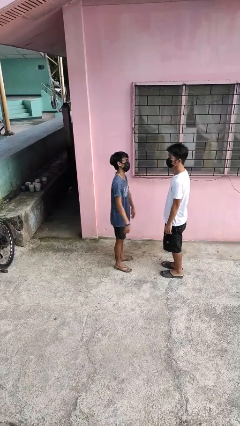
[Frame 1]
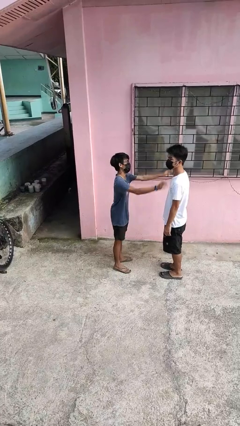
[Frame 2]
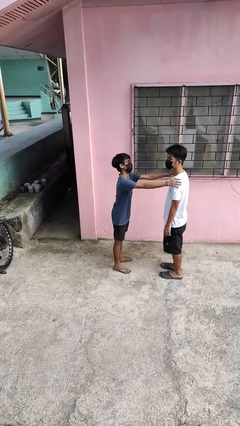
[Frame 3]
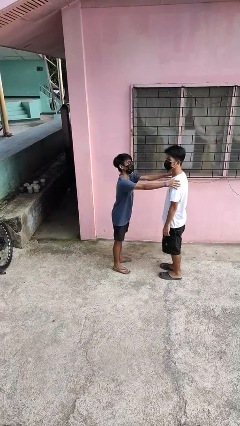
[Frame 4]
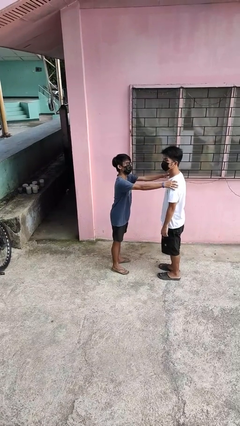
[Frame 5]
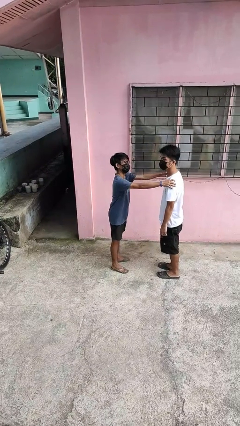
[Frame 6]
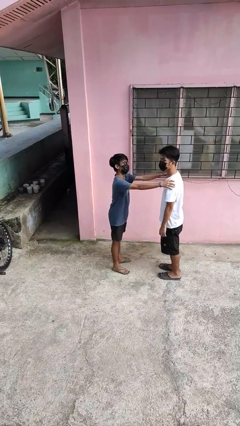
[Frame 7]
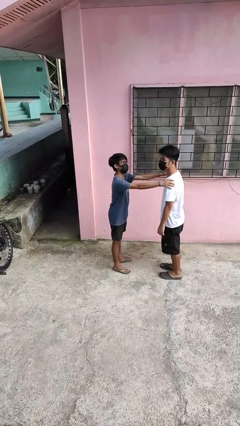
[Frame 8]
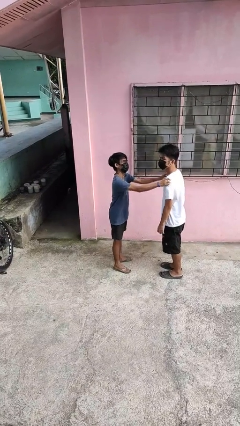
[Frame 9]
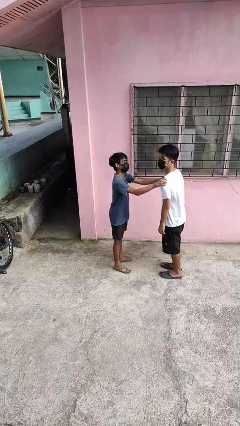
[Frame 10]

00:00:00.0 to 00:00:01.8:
person grabs person by shoulder

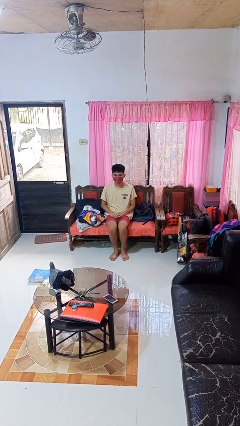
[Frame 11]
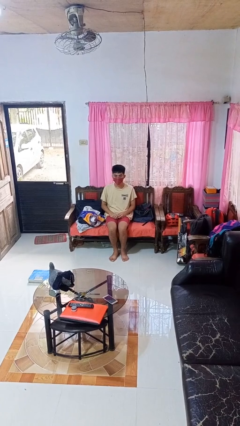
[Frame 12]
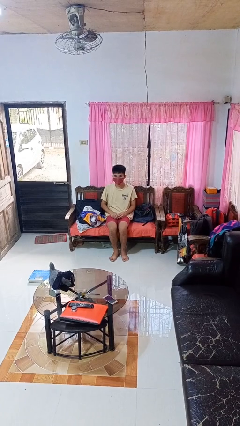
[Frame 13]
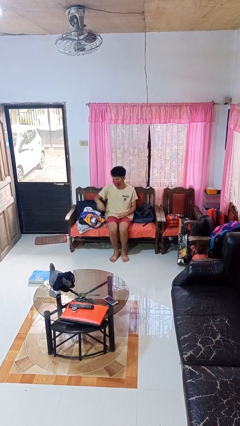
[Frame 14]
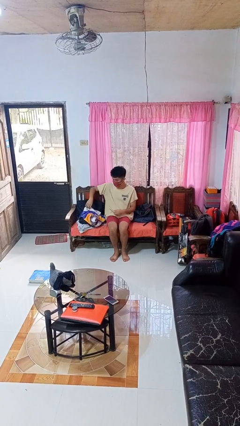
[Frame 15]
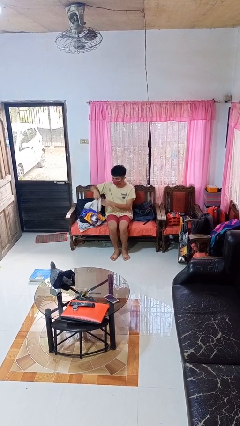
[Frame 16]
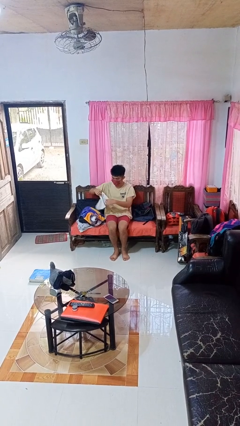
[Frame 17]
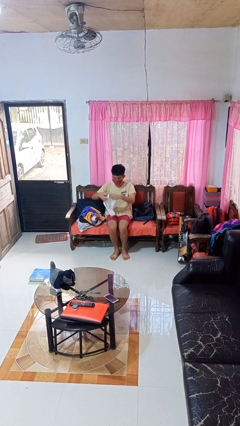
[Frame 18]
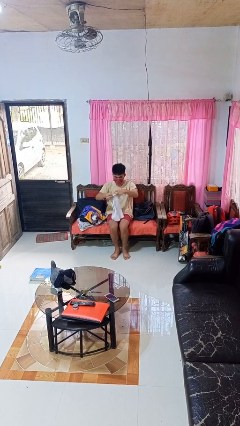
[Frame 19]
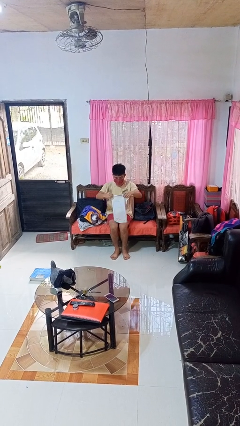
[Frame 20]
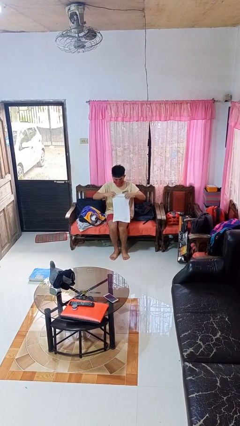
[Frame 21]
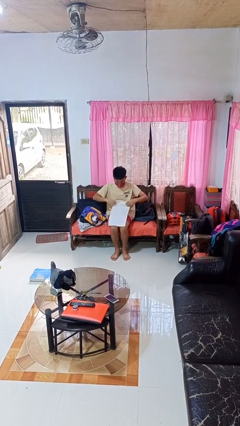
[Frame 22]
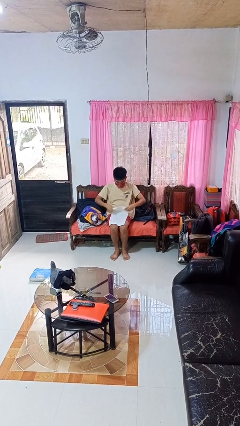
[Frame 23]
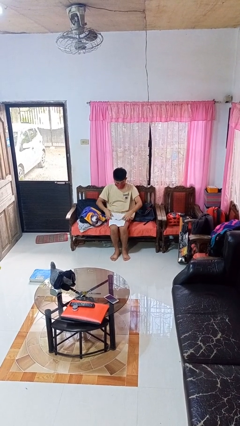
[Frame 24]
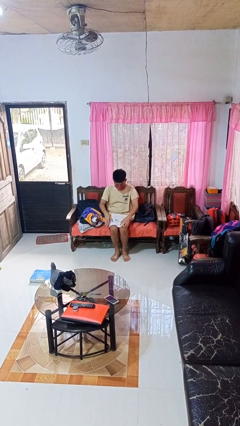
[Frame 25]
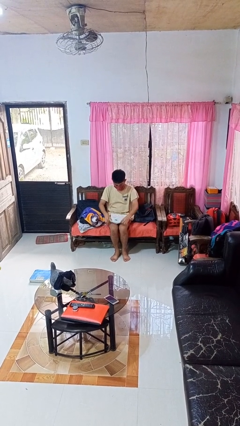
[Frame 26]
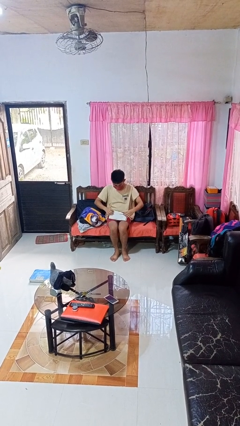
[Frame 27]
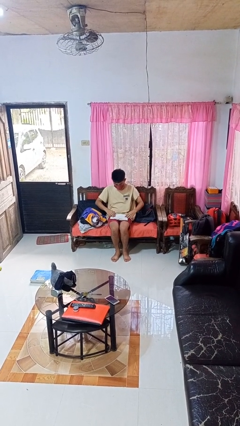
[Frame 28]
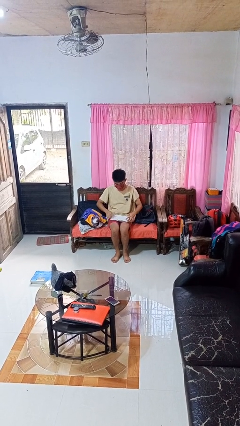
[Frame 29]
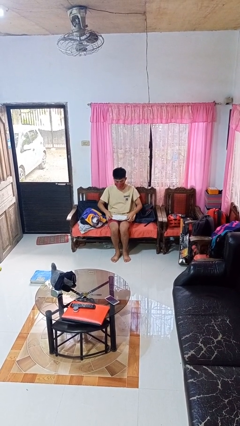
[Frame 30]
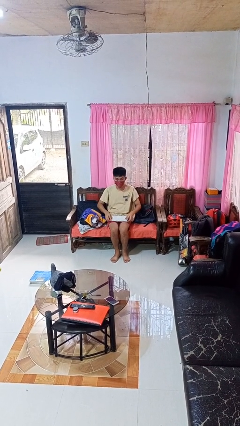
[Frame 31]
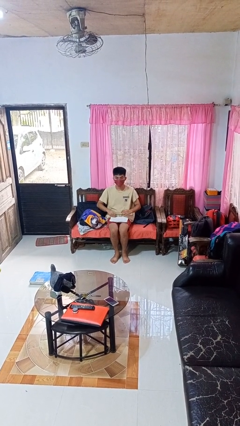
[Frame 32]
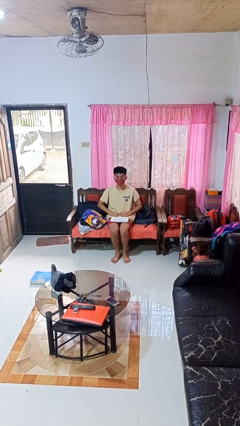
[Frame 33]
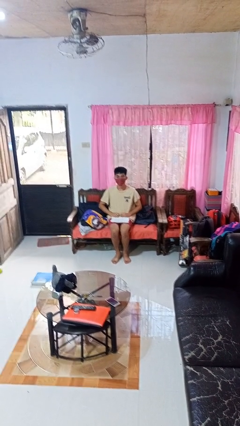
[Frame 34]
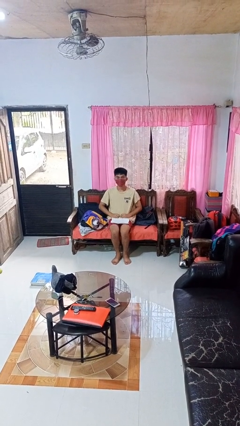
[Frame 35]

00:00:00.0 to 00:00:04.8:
person folds towel

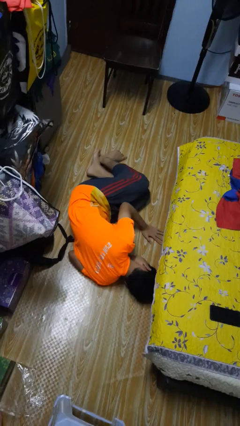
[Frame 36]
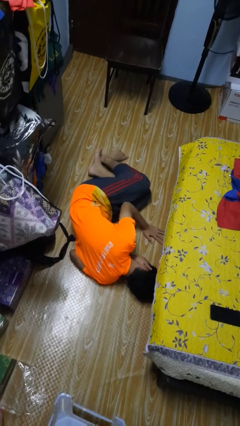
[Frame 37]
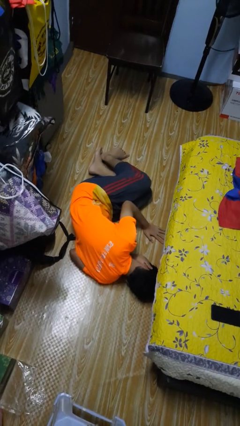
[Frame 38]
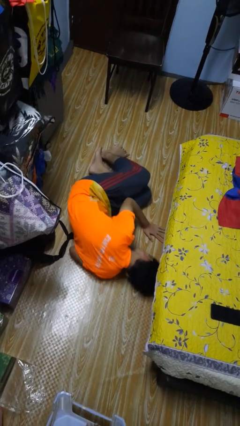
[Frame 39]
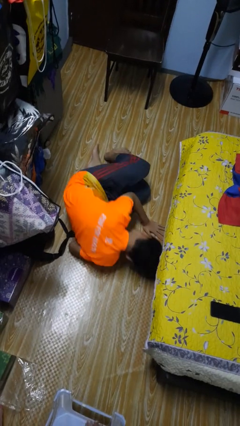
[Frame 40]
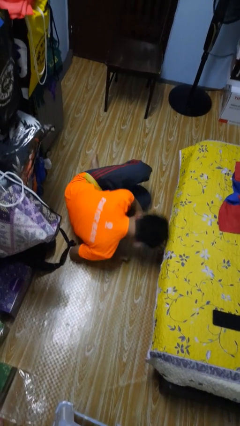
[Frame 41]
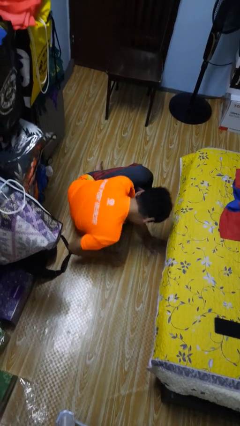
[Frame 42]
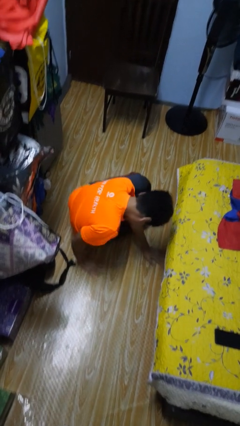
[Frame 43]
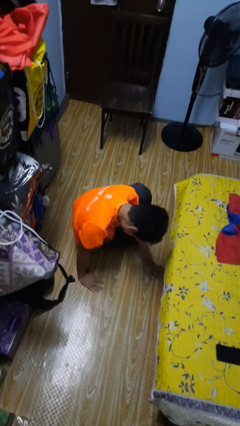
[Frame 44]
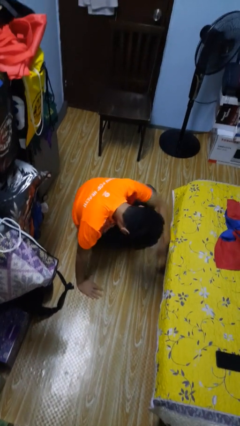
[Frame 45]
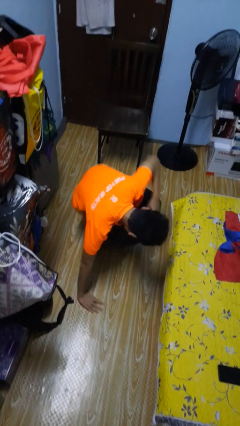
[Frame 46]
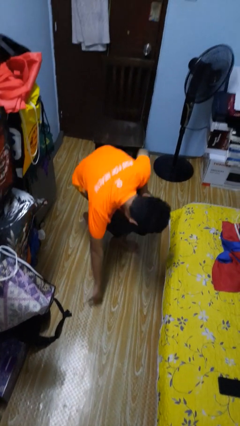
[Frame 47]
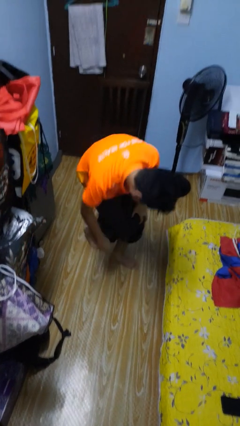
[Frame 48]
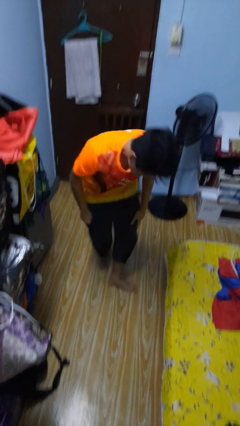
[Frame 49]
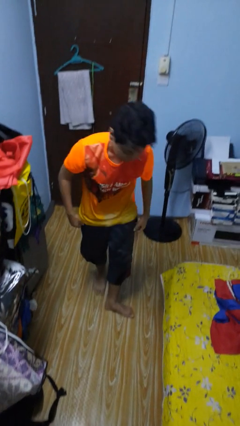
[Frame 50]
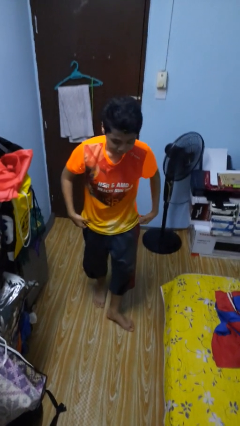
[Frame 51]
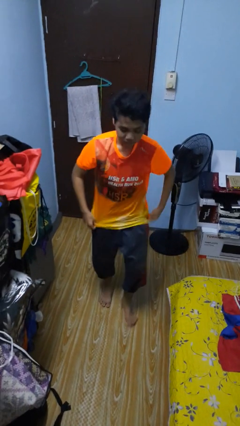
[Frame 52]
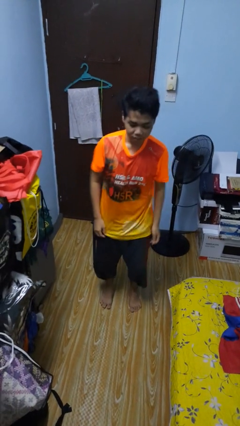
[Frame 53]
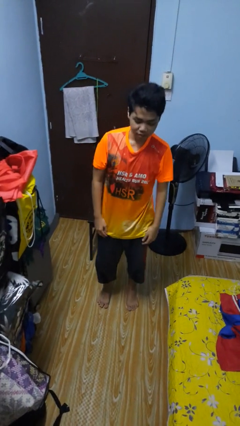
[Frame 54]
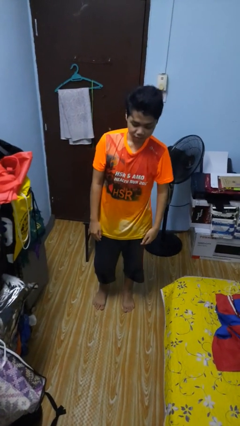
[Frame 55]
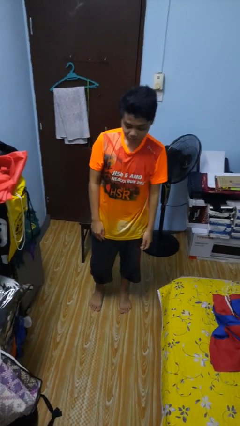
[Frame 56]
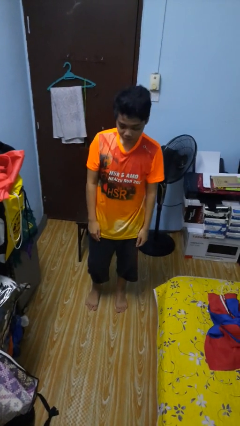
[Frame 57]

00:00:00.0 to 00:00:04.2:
person stands up from floor

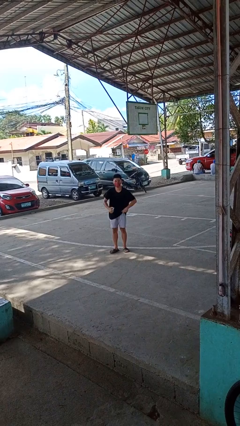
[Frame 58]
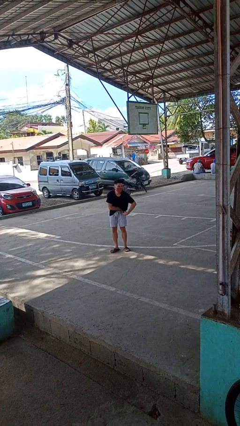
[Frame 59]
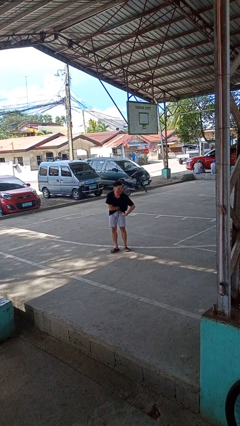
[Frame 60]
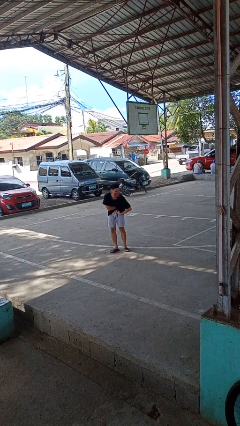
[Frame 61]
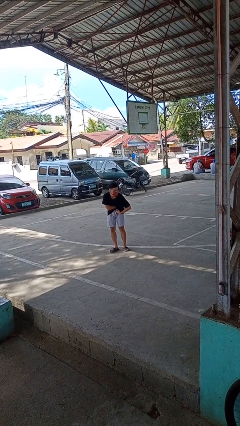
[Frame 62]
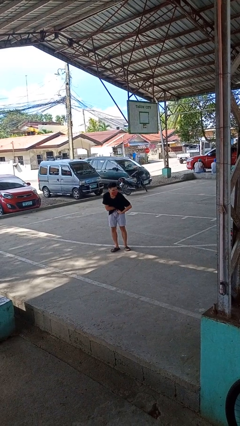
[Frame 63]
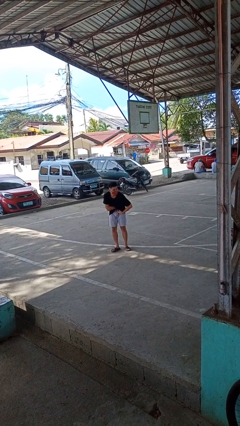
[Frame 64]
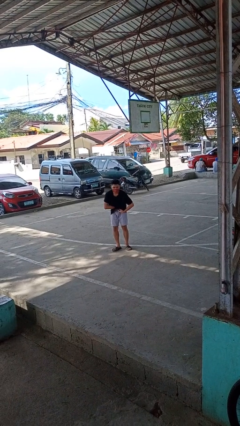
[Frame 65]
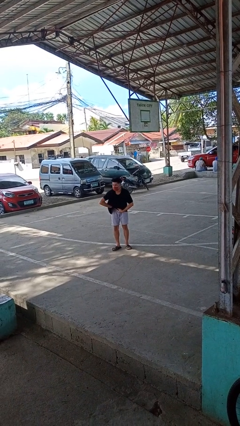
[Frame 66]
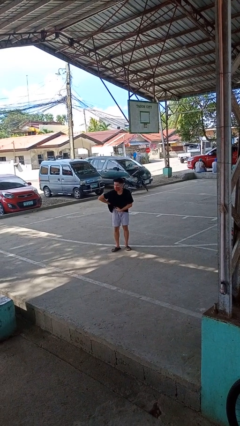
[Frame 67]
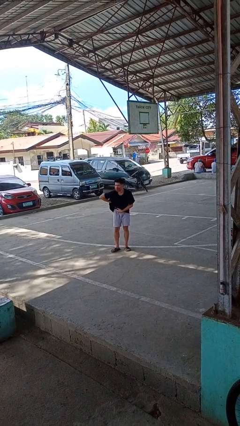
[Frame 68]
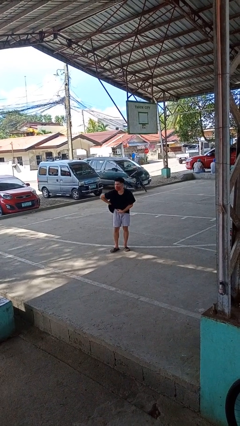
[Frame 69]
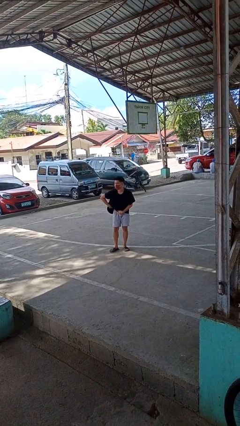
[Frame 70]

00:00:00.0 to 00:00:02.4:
person applies deodorant

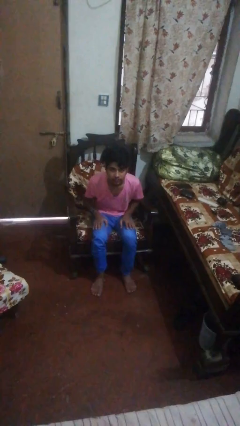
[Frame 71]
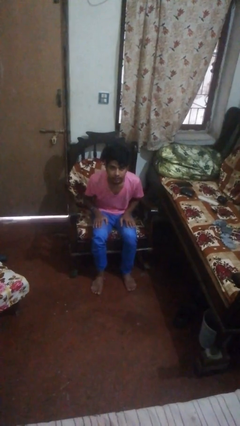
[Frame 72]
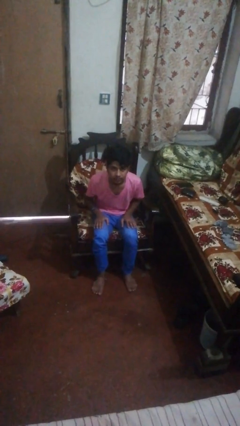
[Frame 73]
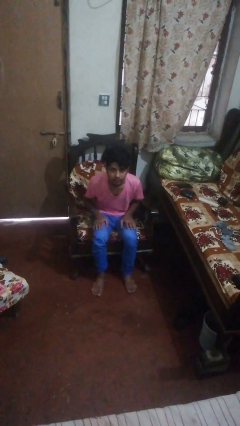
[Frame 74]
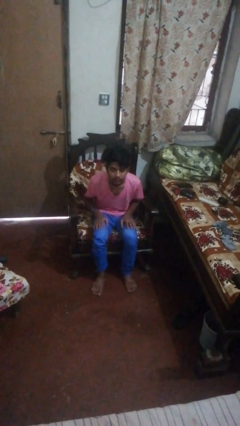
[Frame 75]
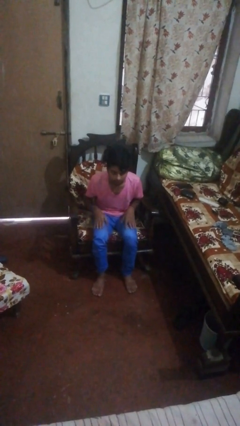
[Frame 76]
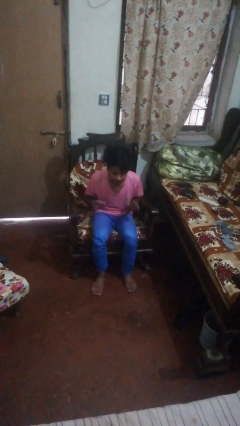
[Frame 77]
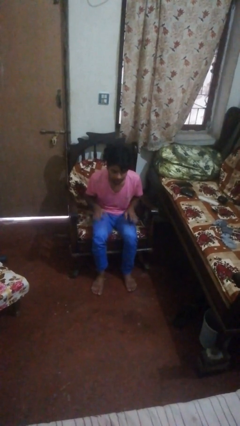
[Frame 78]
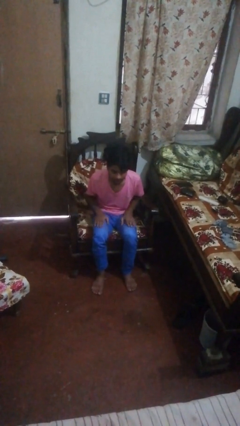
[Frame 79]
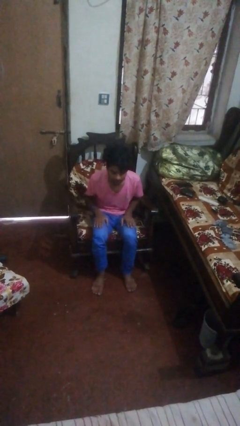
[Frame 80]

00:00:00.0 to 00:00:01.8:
person slaps hands on thighs

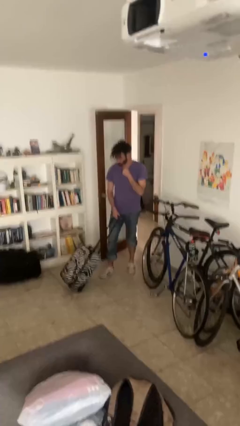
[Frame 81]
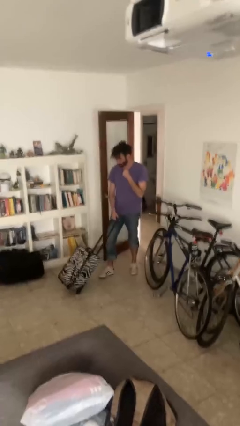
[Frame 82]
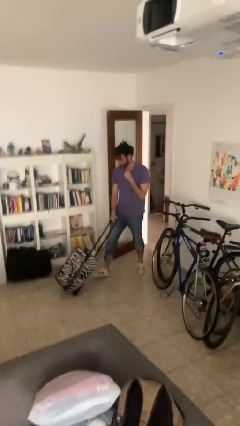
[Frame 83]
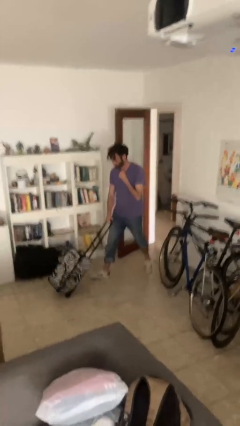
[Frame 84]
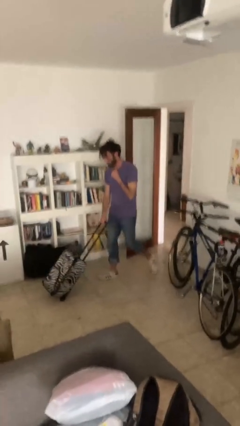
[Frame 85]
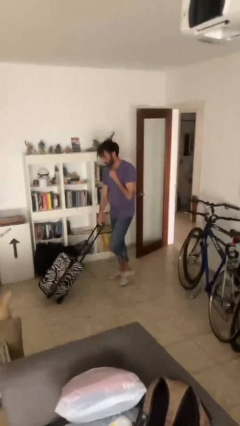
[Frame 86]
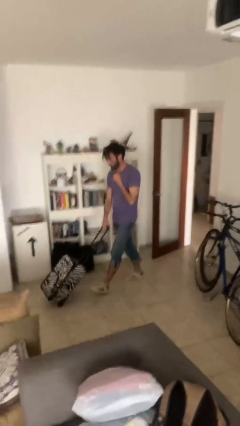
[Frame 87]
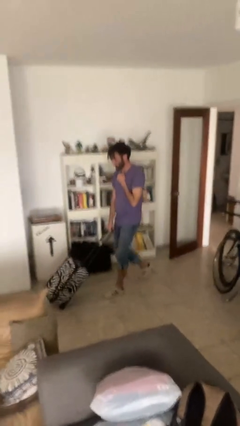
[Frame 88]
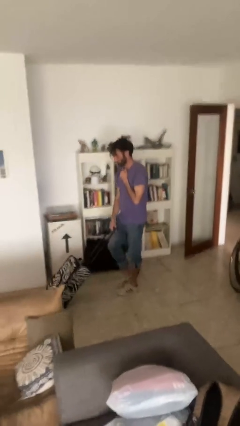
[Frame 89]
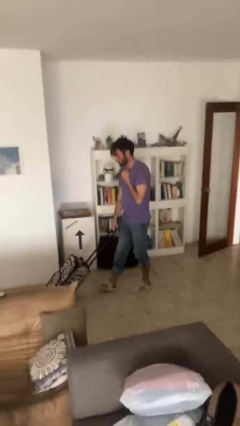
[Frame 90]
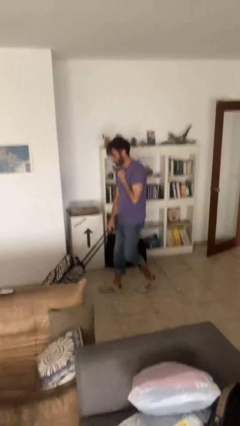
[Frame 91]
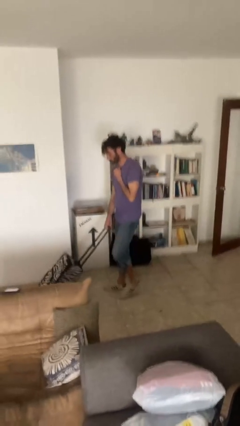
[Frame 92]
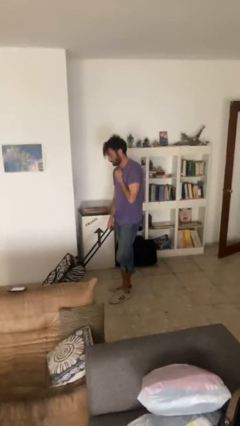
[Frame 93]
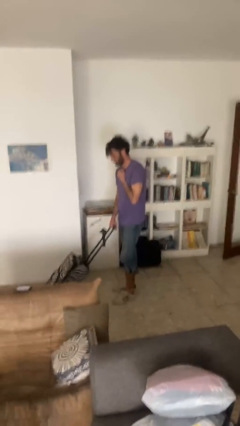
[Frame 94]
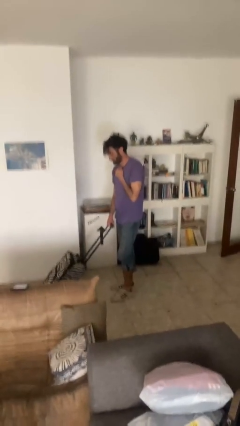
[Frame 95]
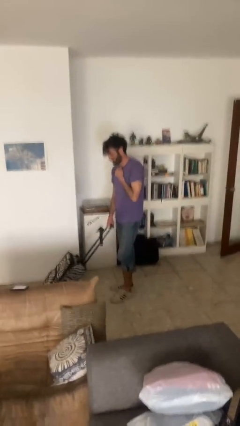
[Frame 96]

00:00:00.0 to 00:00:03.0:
person pushes wheeled cart
